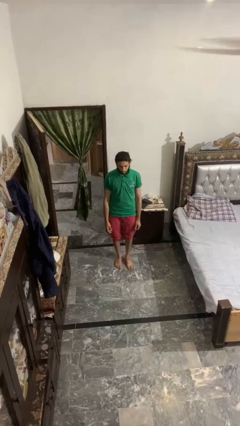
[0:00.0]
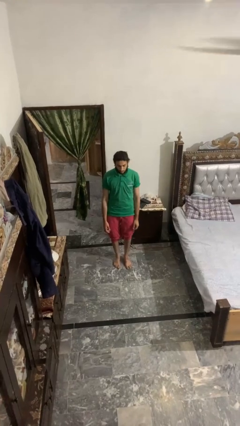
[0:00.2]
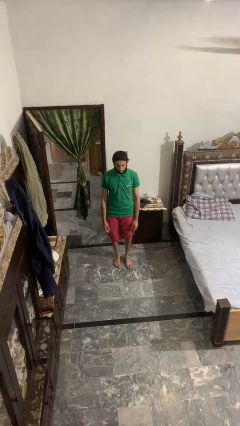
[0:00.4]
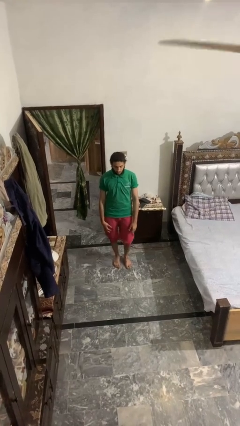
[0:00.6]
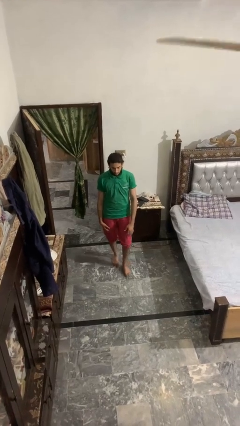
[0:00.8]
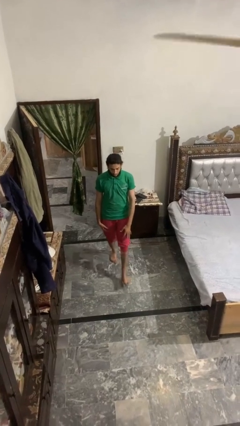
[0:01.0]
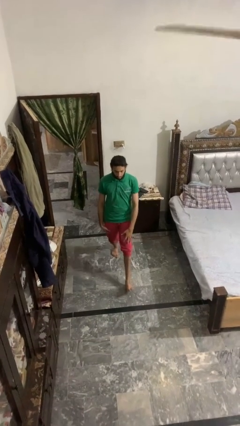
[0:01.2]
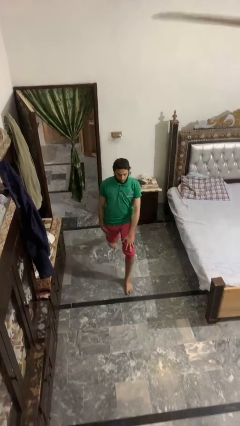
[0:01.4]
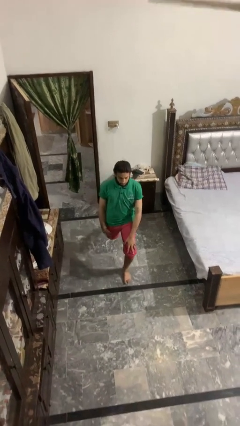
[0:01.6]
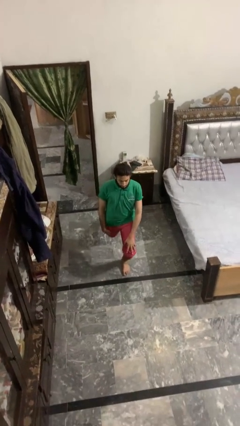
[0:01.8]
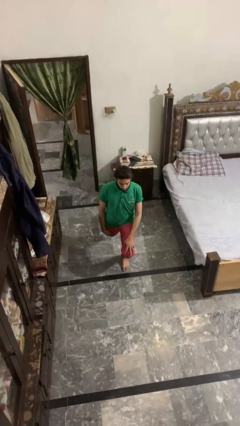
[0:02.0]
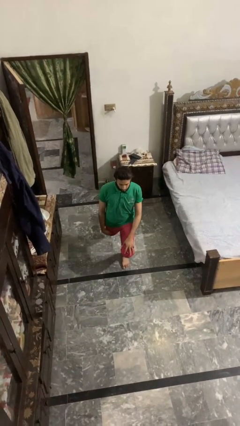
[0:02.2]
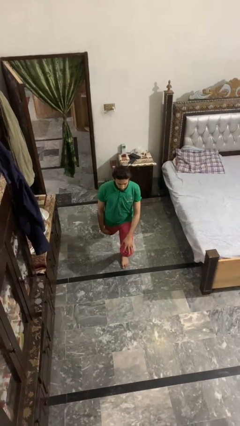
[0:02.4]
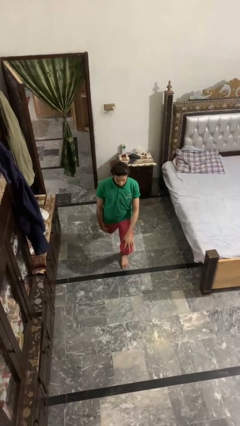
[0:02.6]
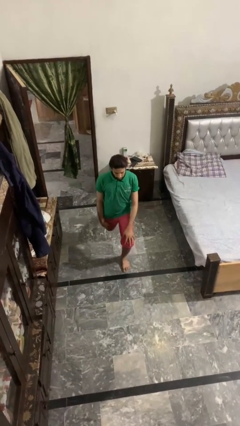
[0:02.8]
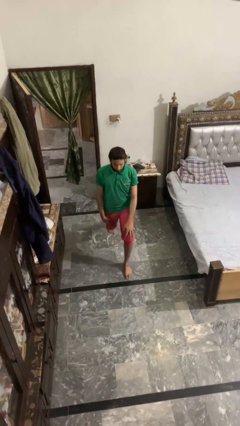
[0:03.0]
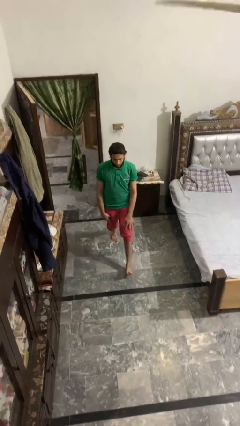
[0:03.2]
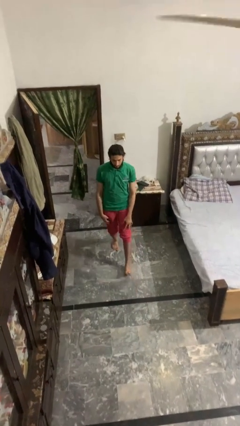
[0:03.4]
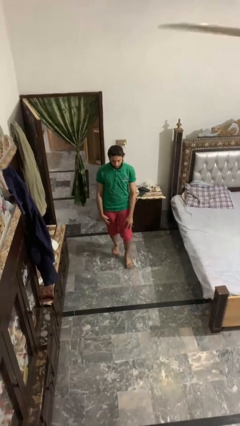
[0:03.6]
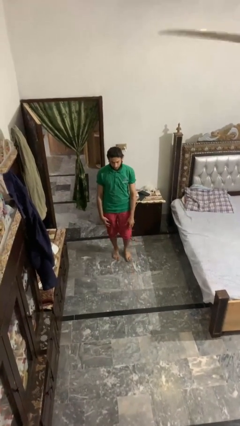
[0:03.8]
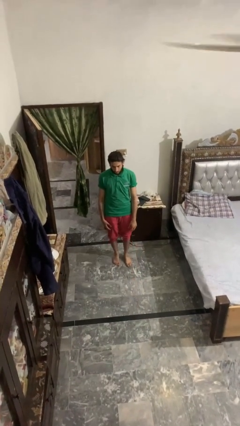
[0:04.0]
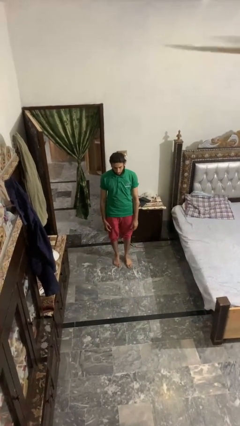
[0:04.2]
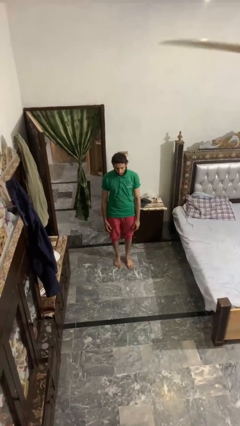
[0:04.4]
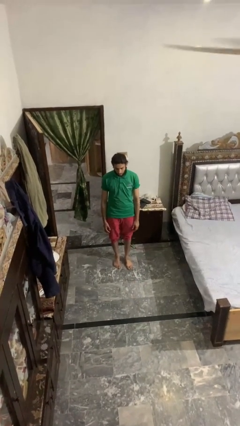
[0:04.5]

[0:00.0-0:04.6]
person exercises with lunges

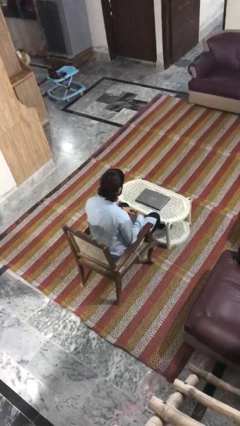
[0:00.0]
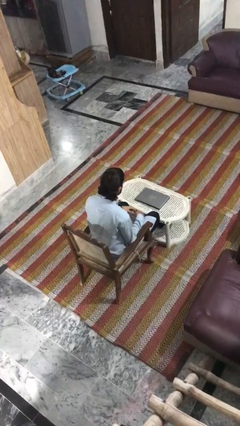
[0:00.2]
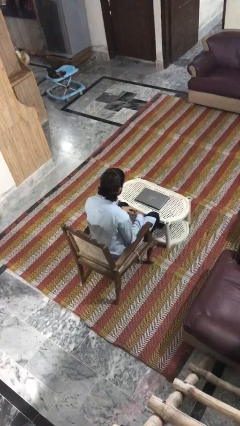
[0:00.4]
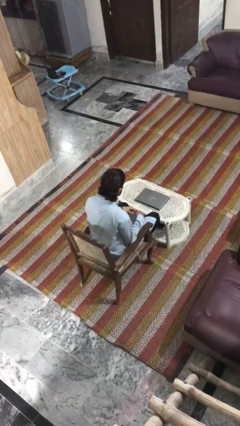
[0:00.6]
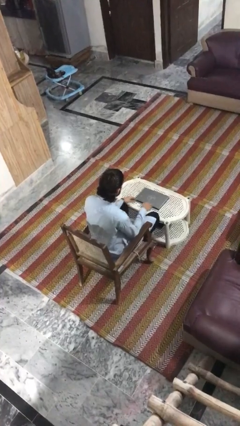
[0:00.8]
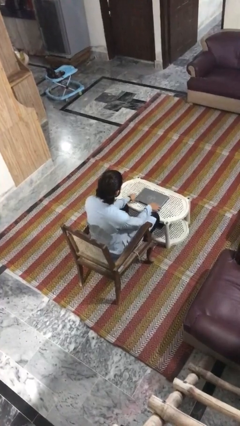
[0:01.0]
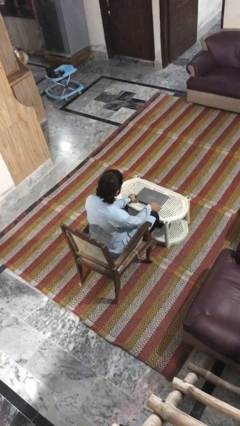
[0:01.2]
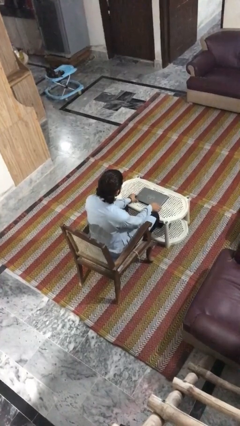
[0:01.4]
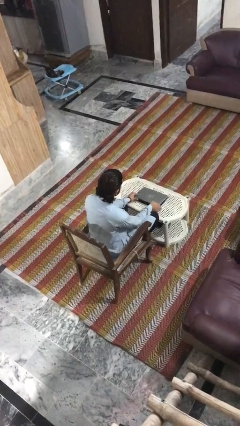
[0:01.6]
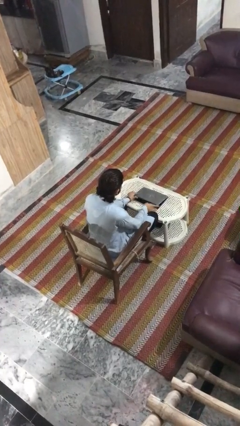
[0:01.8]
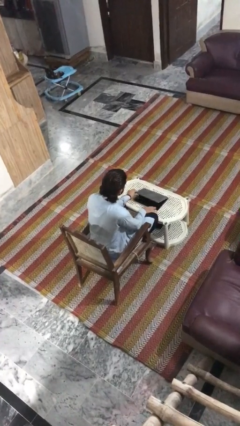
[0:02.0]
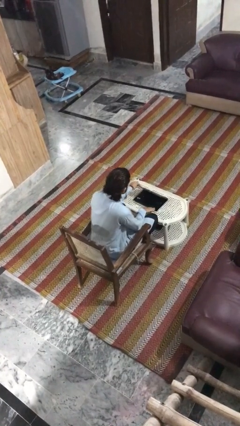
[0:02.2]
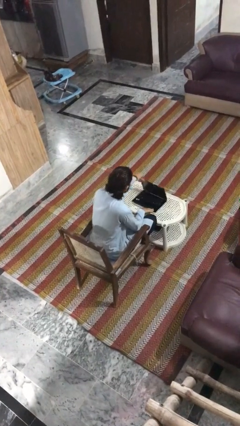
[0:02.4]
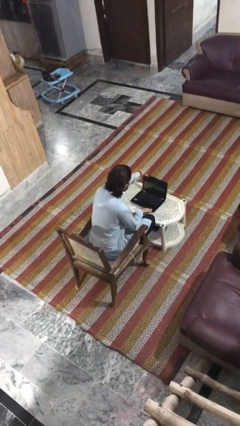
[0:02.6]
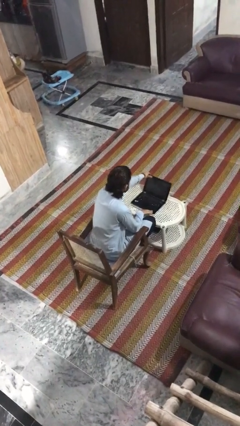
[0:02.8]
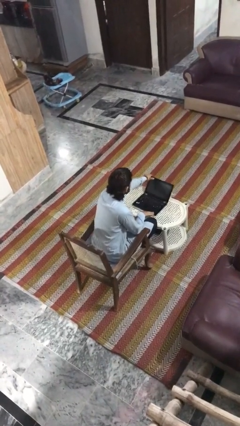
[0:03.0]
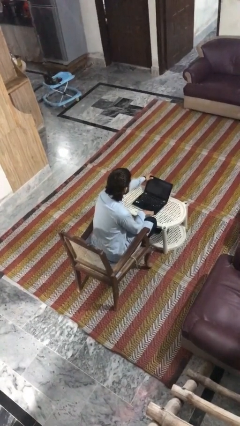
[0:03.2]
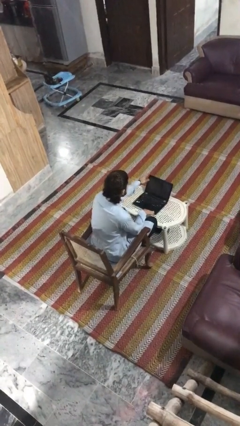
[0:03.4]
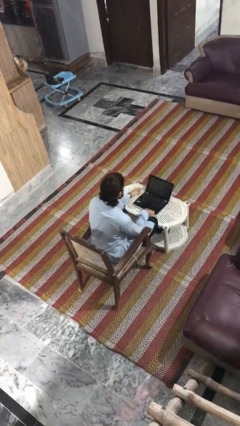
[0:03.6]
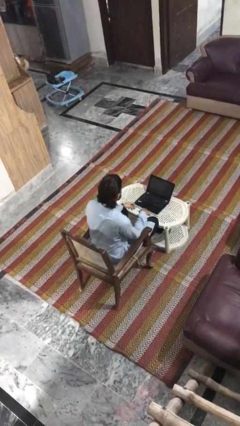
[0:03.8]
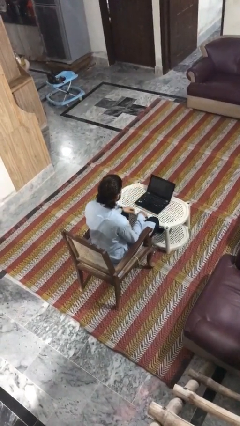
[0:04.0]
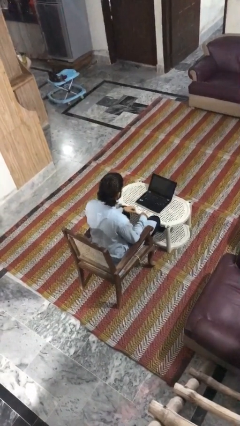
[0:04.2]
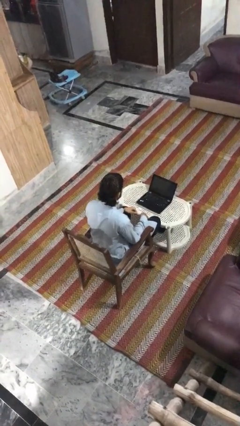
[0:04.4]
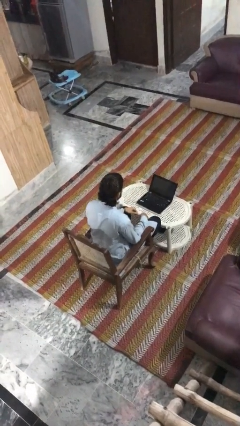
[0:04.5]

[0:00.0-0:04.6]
person opens laptop

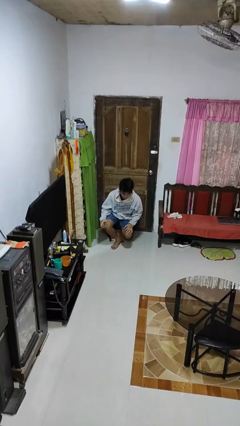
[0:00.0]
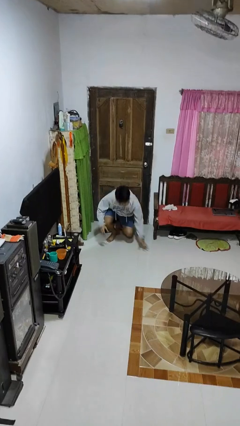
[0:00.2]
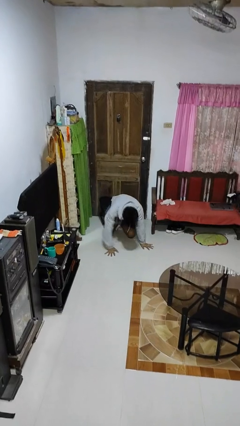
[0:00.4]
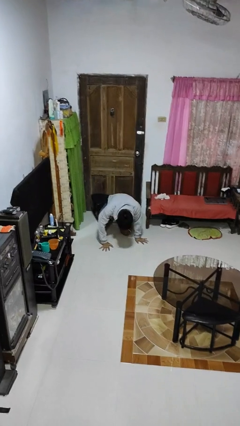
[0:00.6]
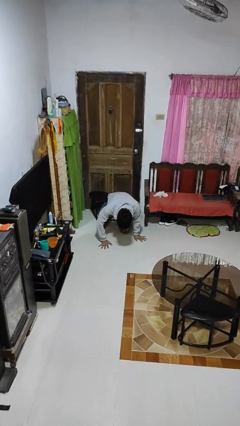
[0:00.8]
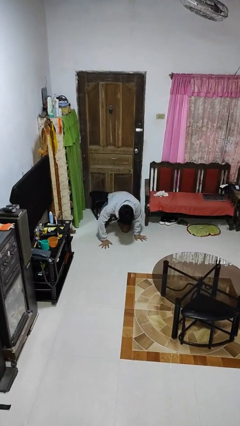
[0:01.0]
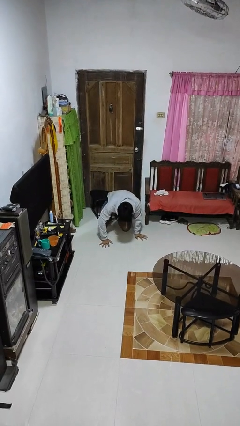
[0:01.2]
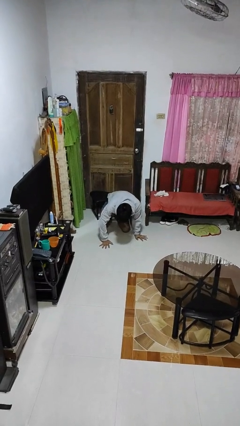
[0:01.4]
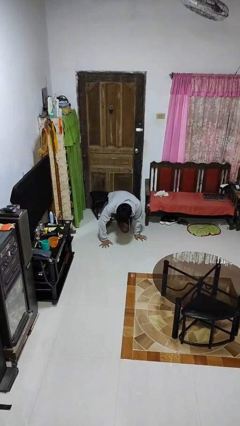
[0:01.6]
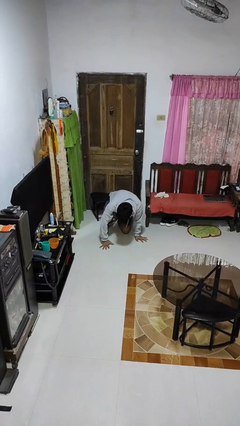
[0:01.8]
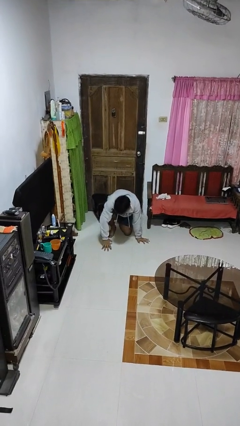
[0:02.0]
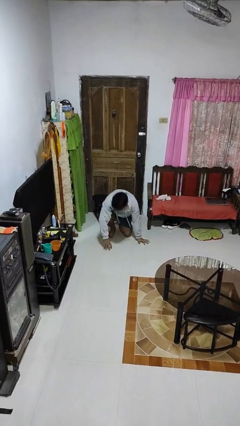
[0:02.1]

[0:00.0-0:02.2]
person falls from chair

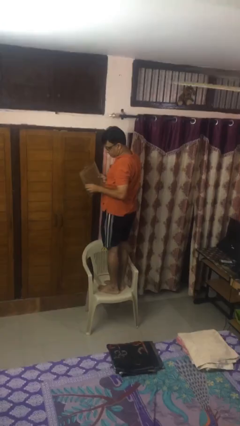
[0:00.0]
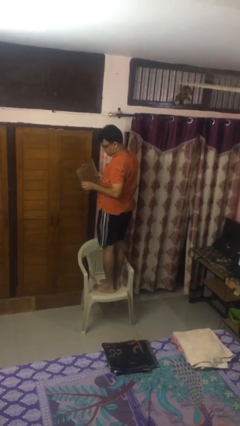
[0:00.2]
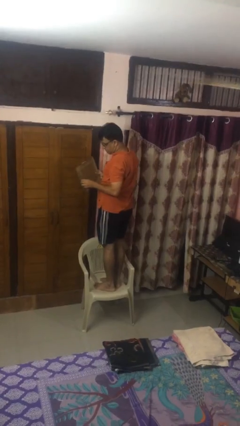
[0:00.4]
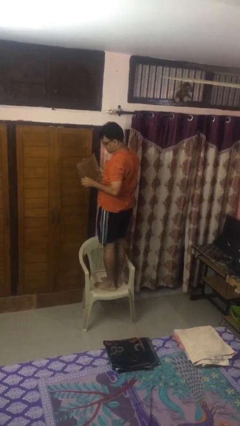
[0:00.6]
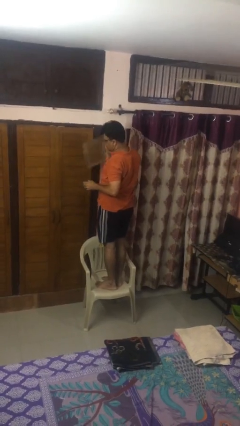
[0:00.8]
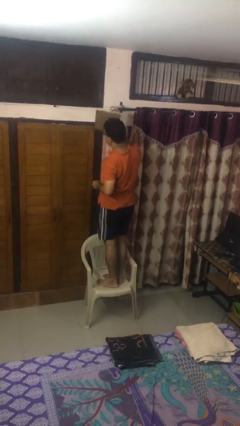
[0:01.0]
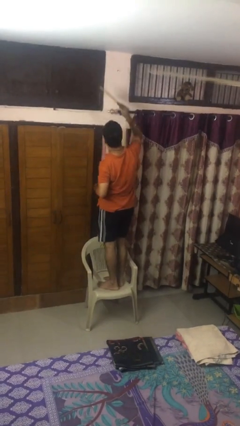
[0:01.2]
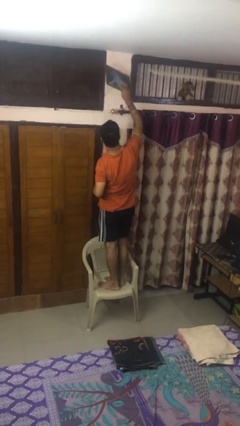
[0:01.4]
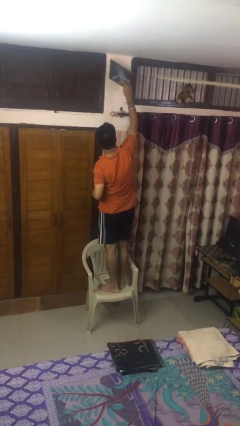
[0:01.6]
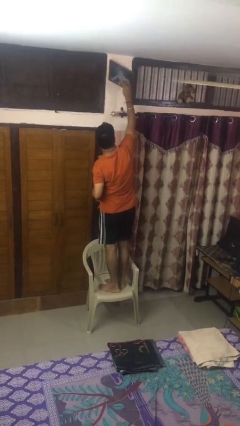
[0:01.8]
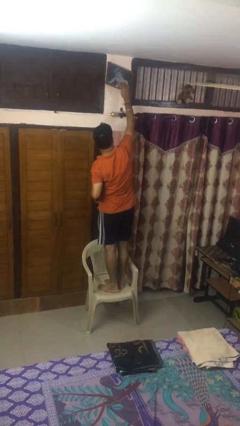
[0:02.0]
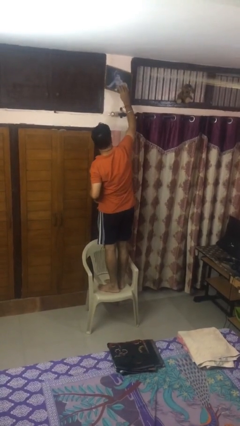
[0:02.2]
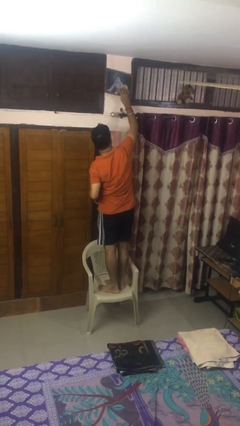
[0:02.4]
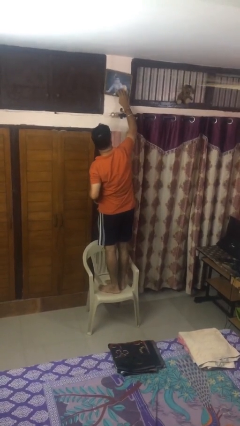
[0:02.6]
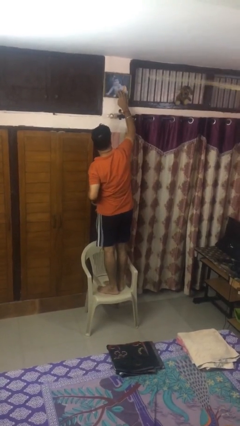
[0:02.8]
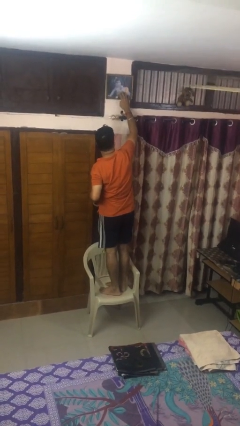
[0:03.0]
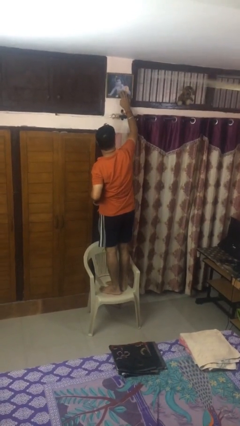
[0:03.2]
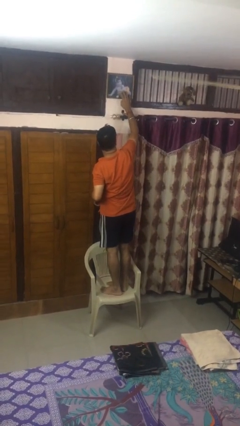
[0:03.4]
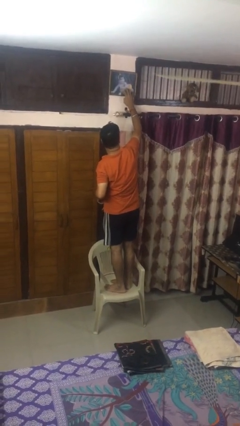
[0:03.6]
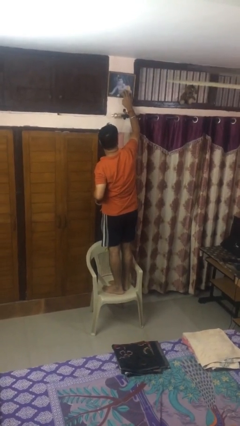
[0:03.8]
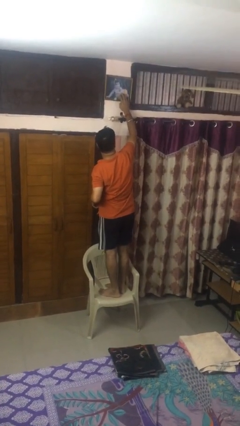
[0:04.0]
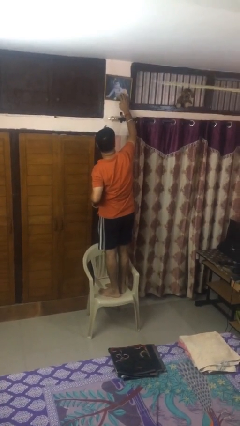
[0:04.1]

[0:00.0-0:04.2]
person puts up picture frame

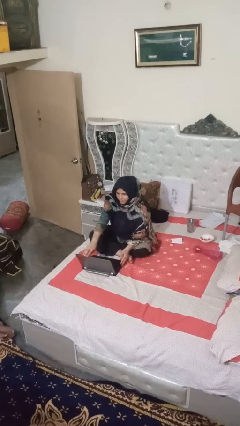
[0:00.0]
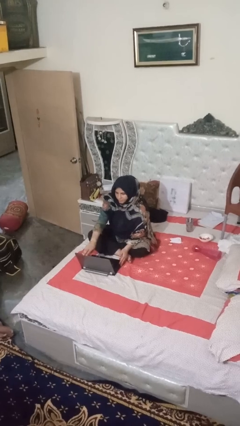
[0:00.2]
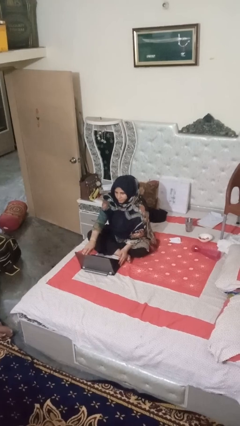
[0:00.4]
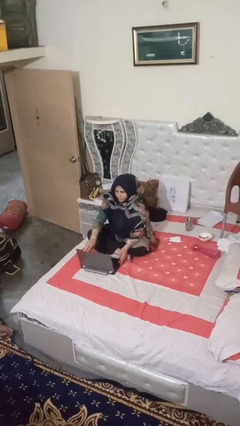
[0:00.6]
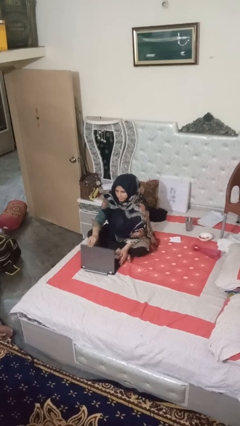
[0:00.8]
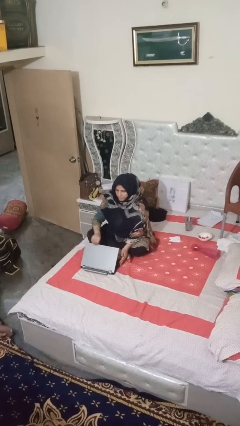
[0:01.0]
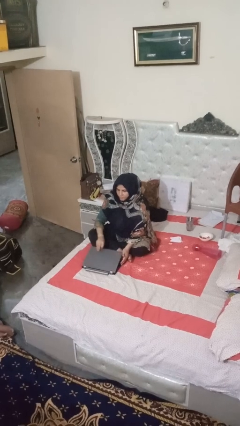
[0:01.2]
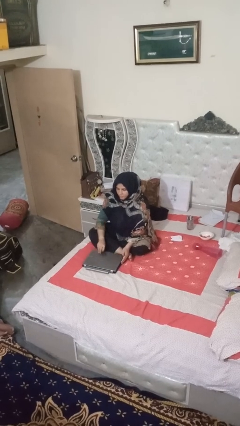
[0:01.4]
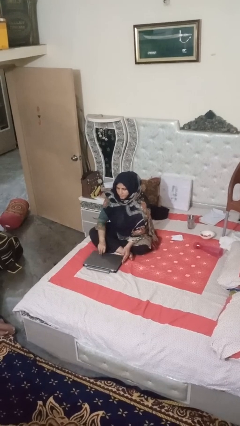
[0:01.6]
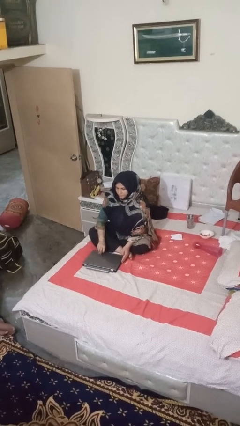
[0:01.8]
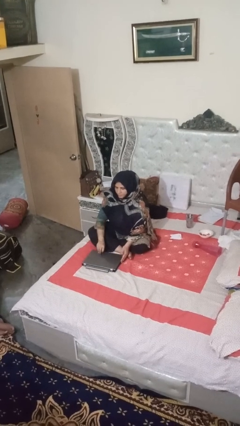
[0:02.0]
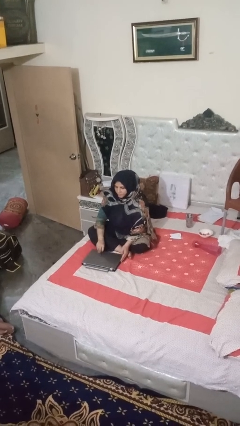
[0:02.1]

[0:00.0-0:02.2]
person closes laptop
